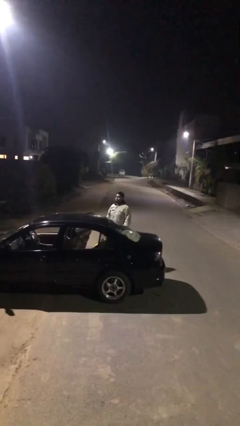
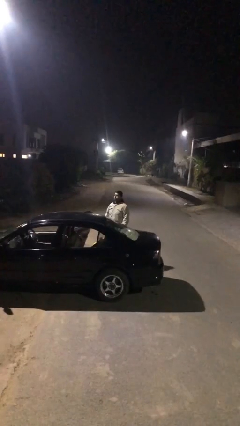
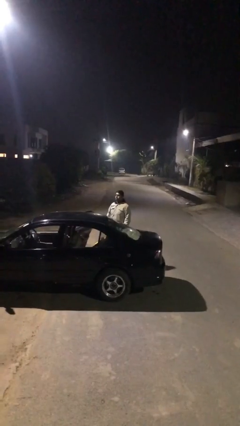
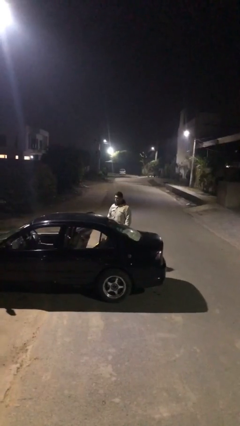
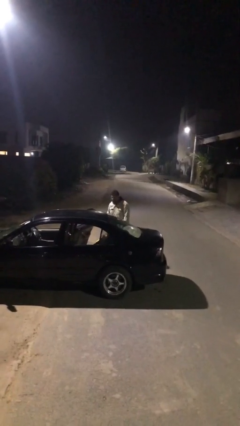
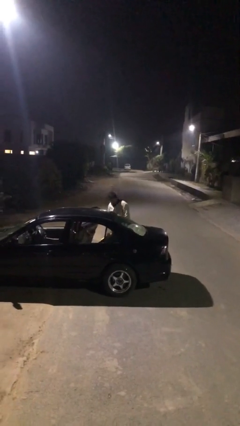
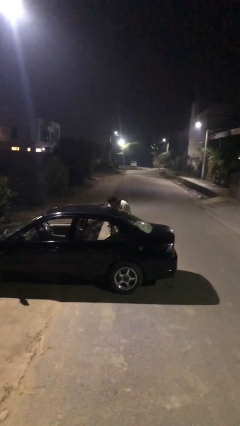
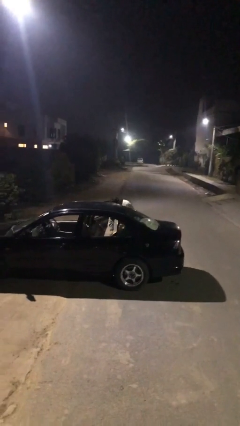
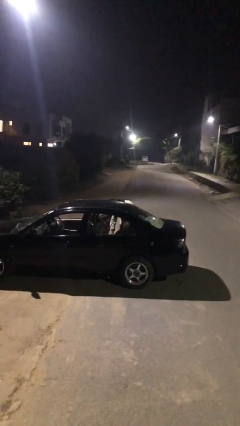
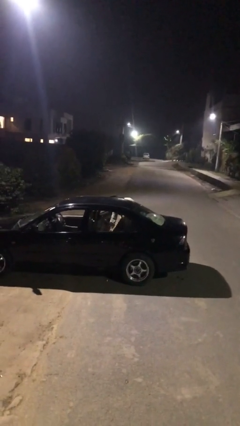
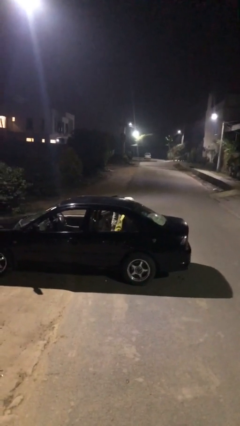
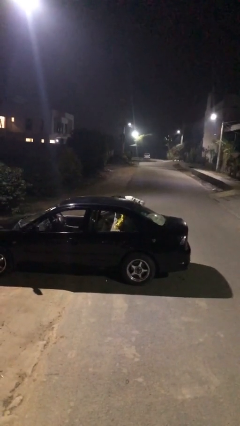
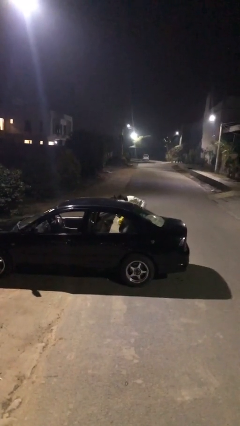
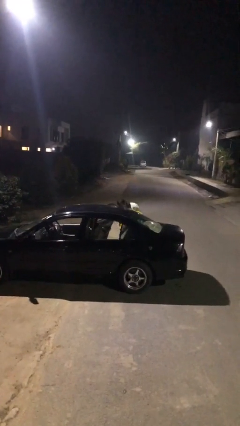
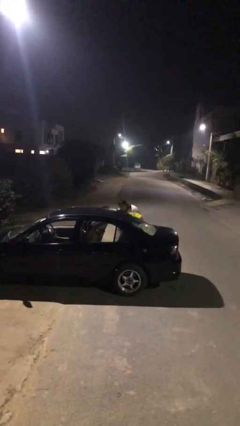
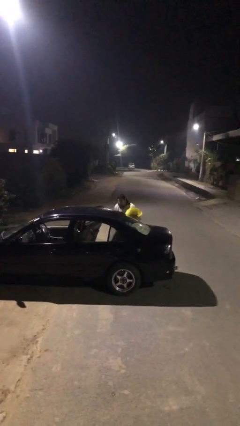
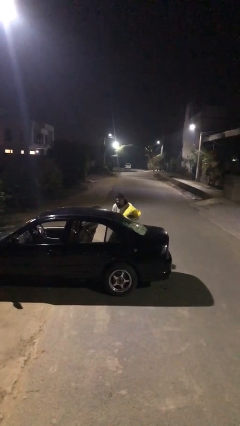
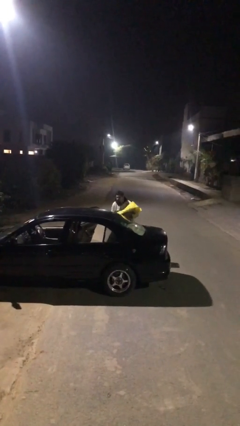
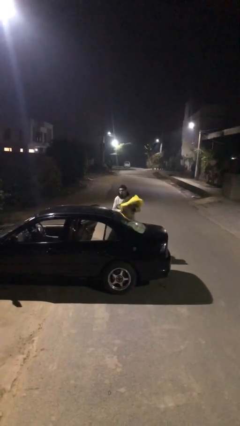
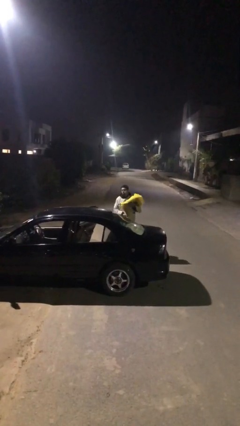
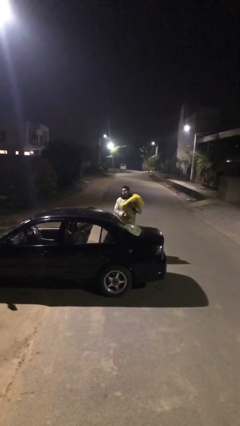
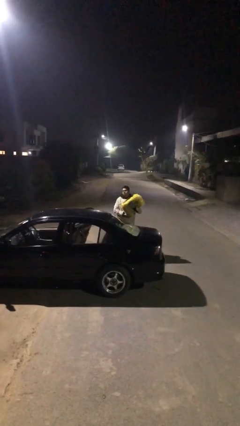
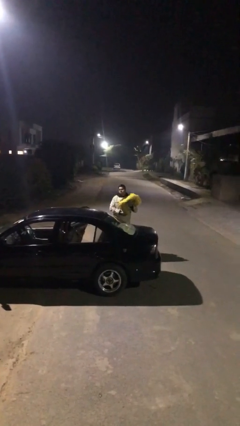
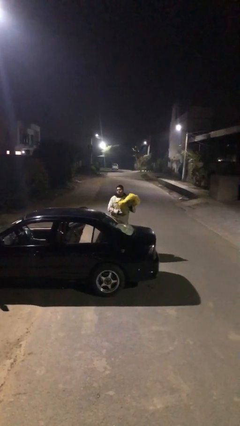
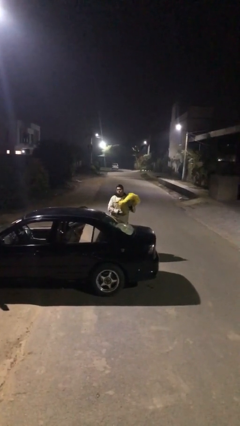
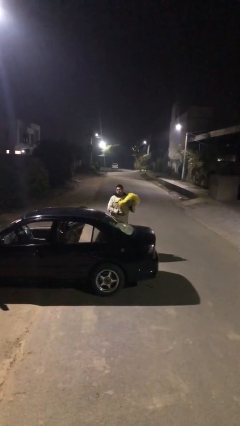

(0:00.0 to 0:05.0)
person unloads car

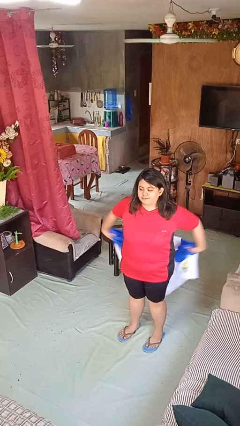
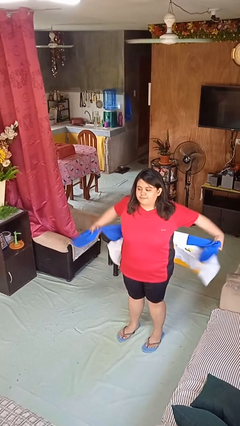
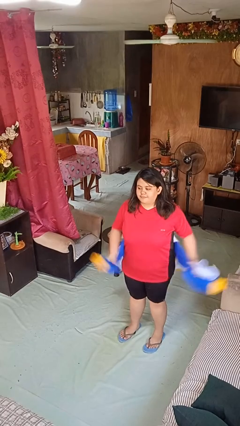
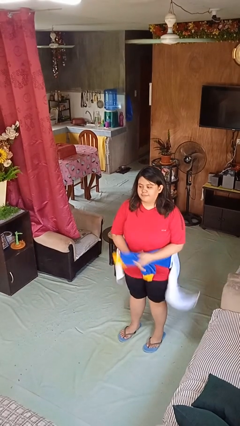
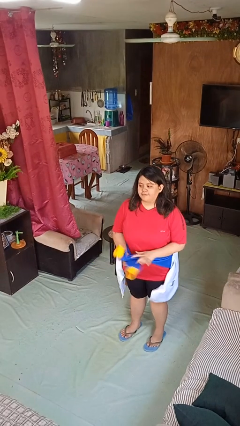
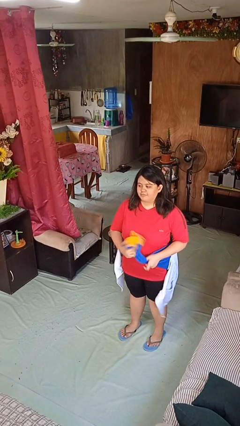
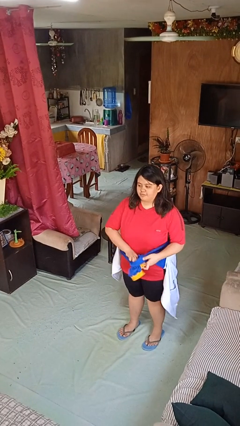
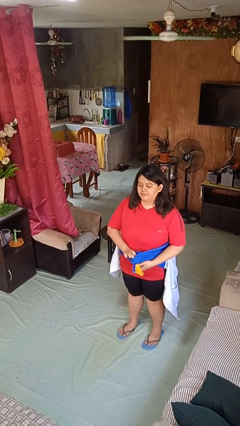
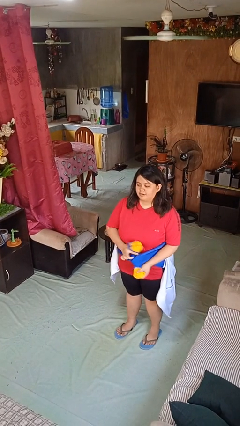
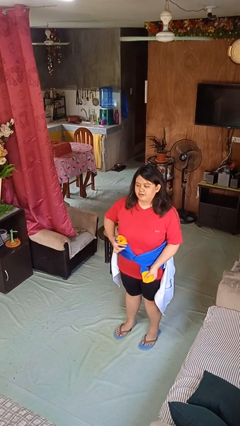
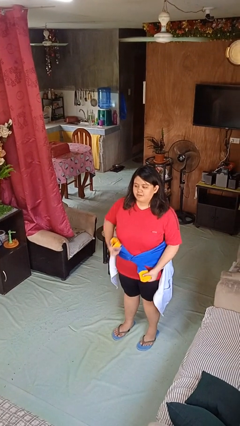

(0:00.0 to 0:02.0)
person ties jacket around waist

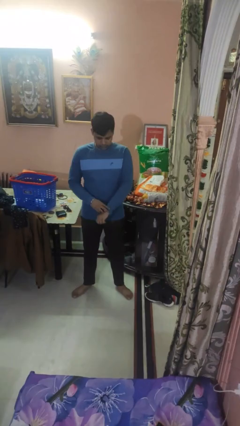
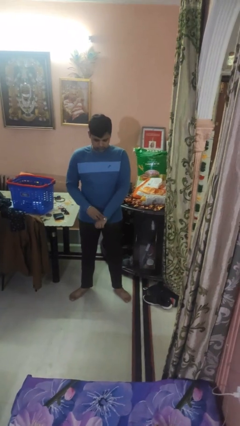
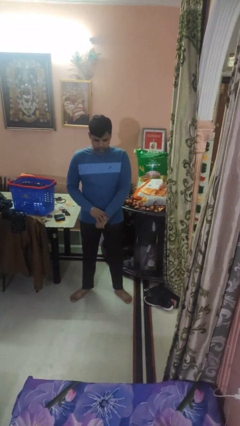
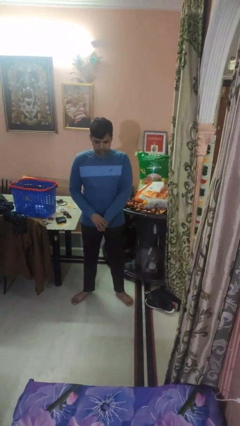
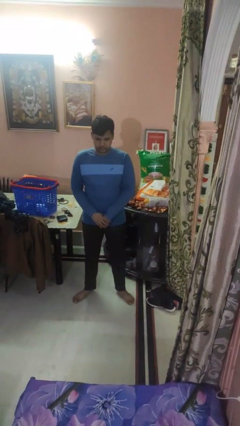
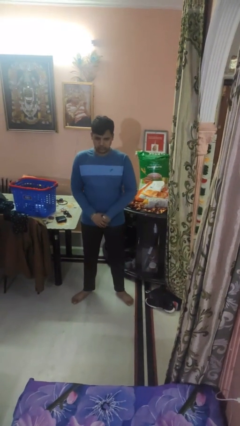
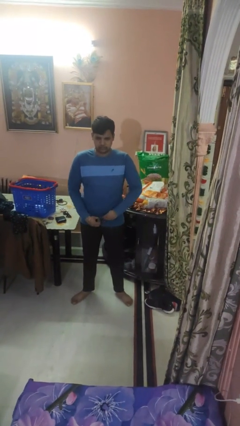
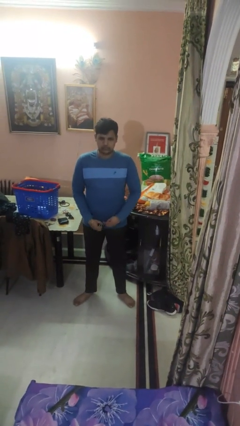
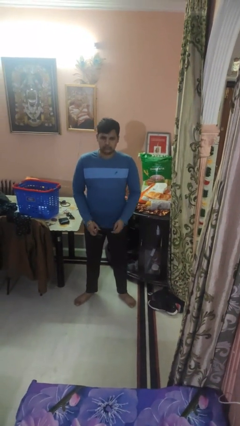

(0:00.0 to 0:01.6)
person takes off wristwatch

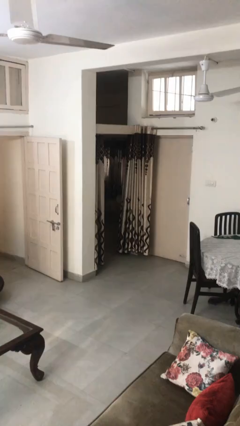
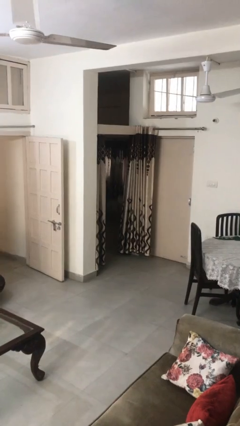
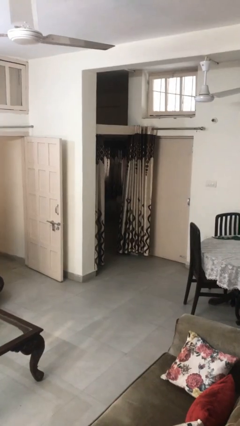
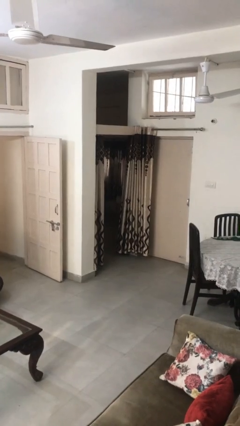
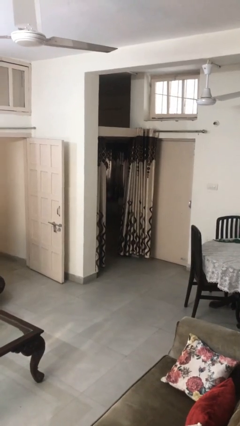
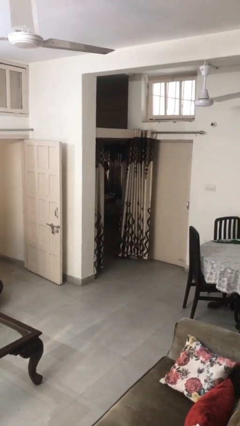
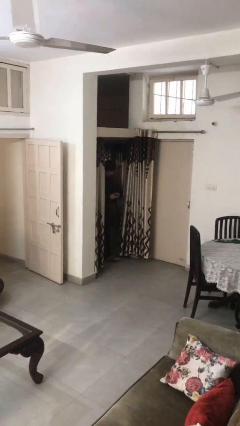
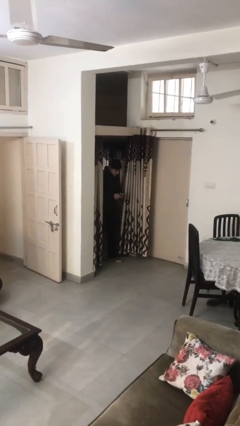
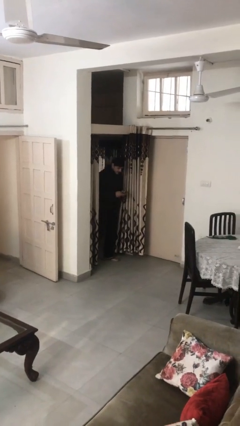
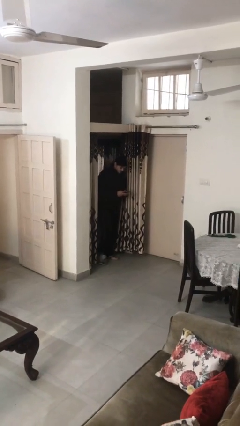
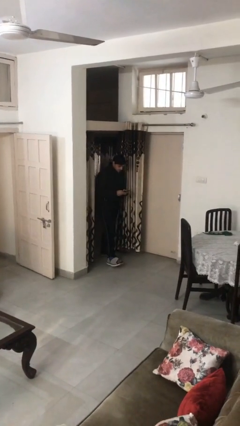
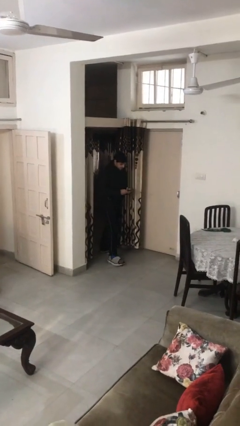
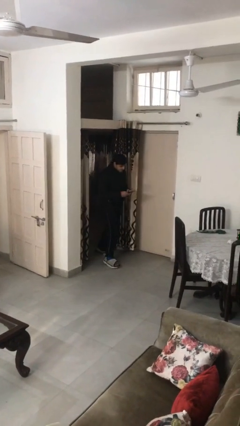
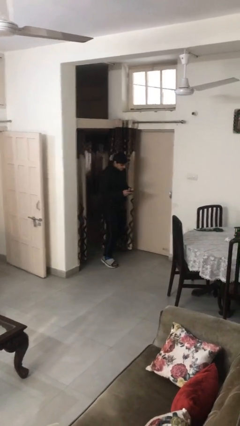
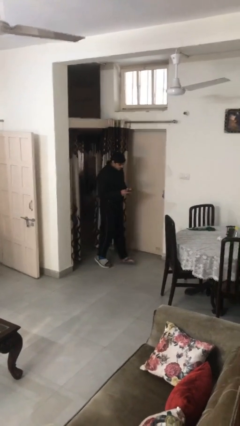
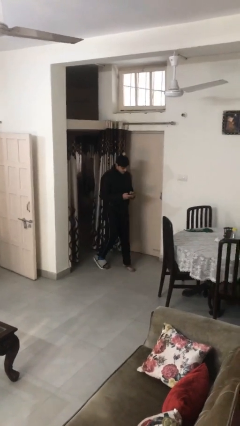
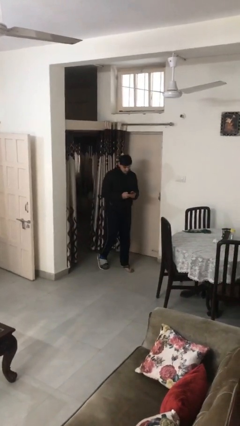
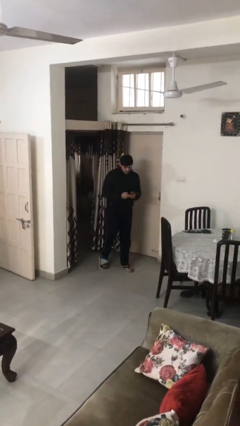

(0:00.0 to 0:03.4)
person enters scene through structure

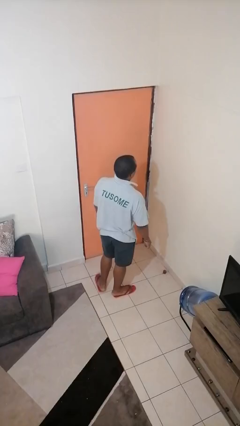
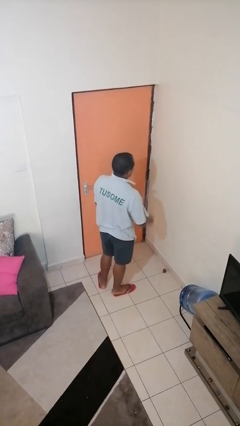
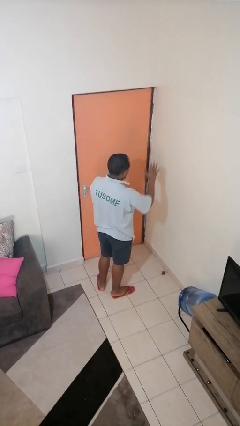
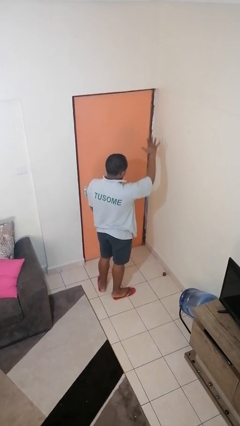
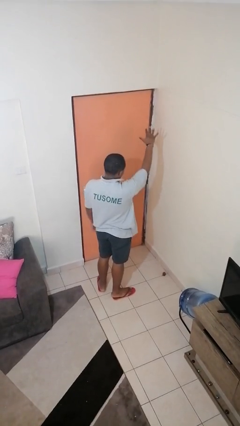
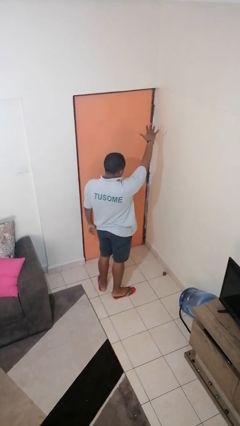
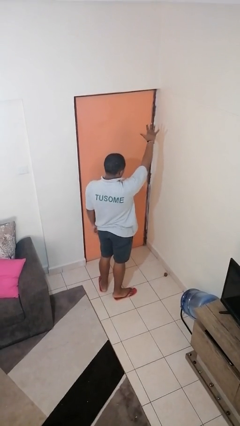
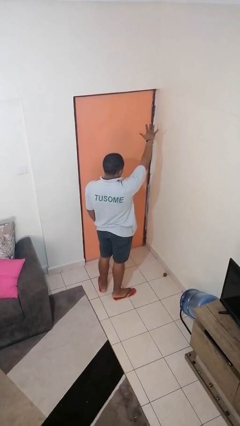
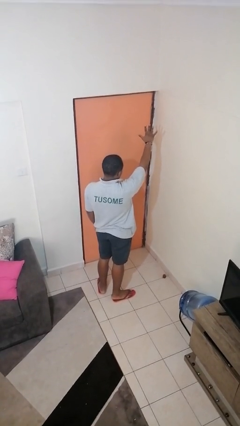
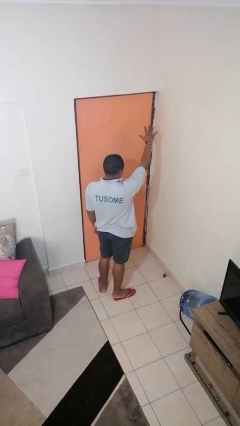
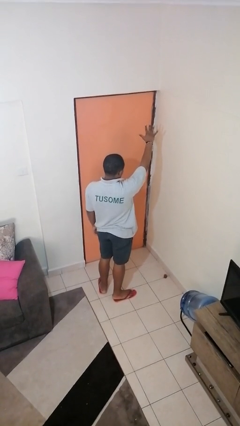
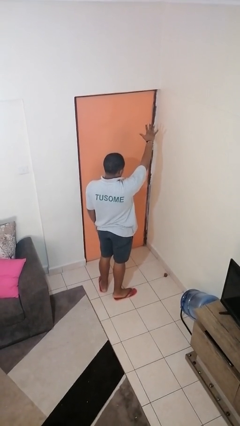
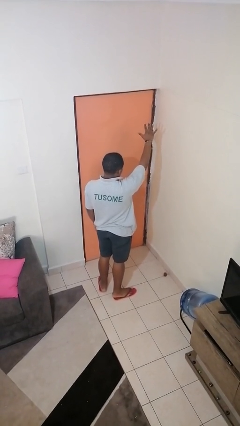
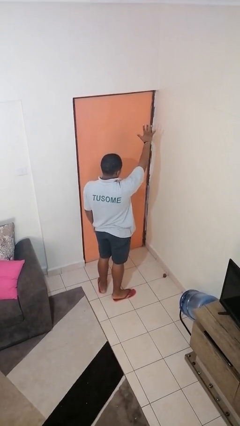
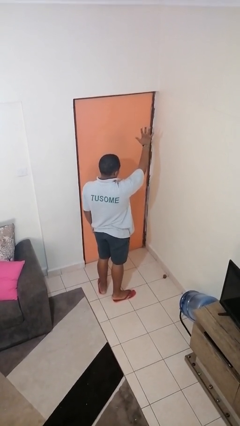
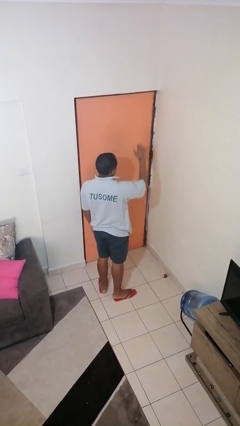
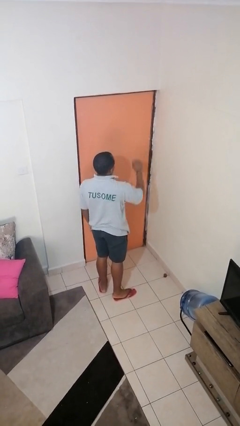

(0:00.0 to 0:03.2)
person gestures number five

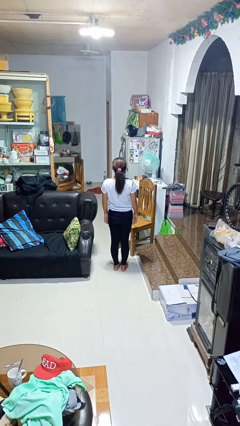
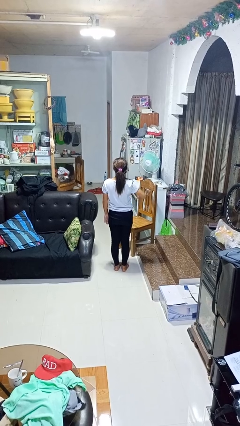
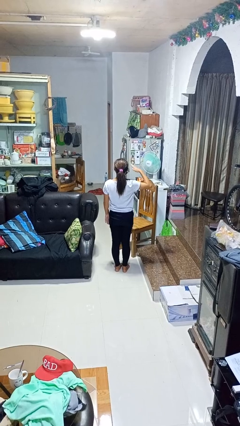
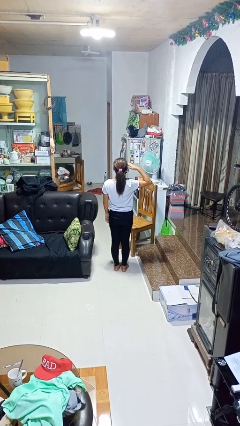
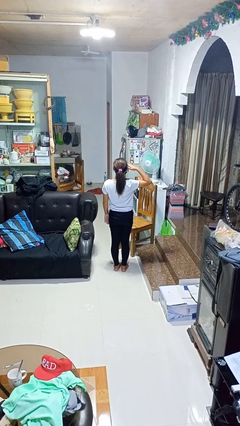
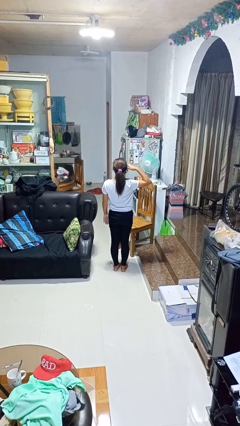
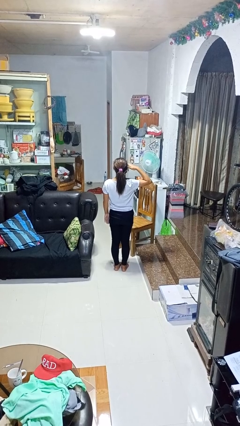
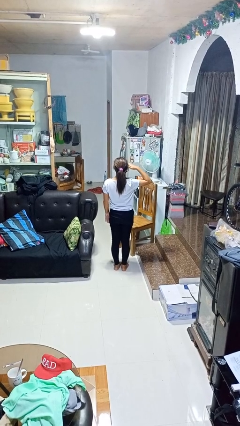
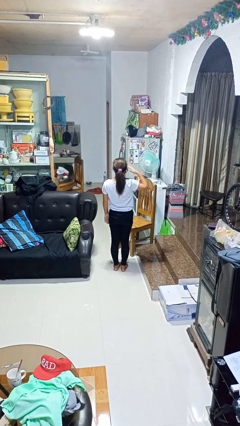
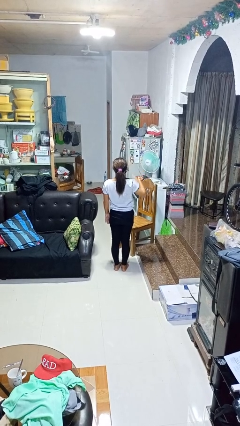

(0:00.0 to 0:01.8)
person salutes

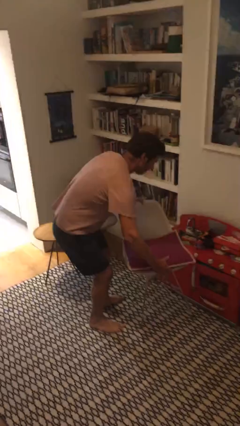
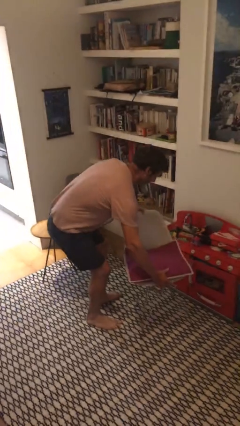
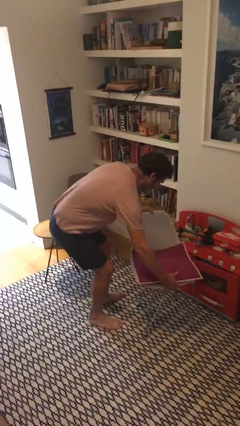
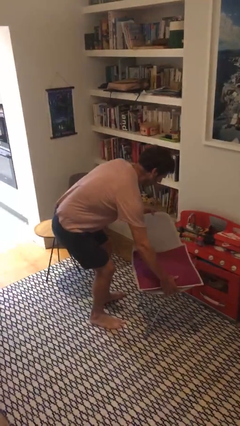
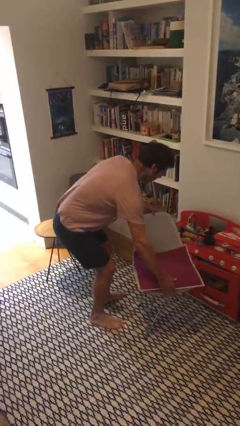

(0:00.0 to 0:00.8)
person puts down object on floor
